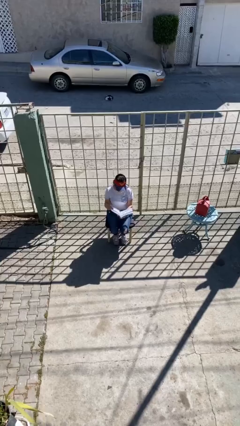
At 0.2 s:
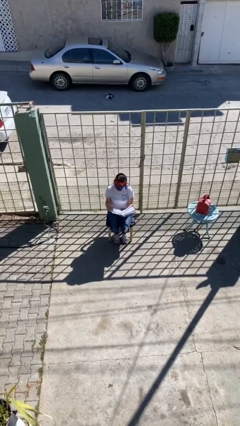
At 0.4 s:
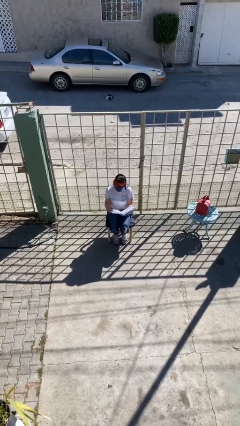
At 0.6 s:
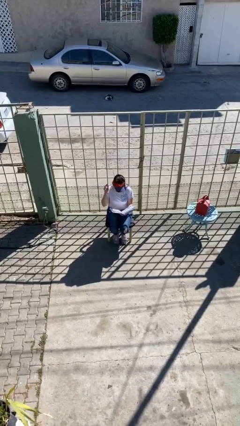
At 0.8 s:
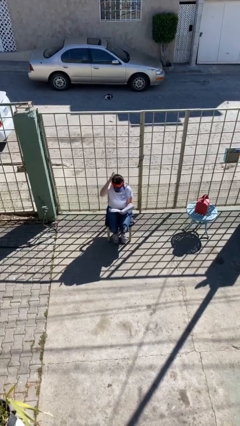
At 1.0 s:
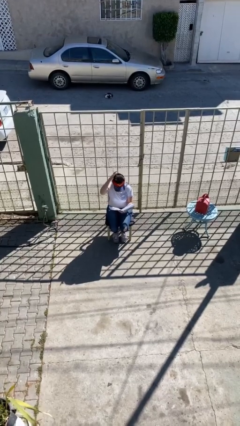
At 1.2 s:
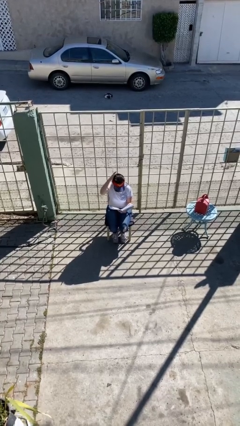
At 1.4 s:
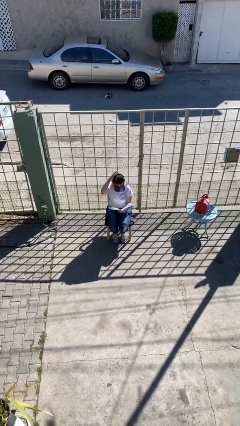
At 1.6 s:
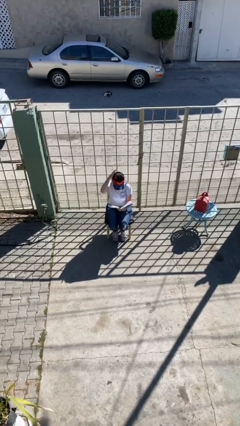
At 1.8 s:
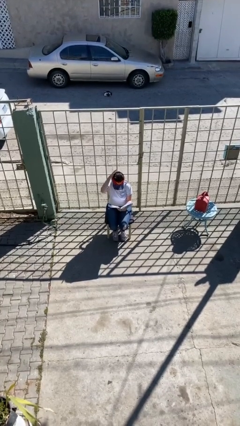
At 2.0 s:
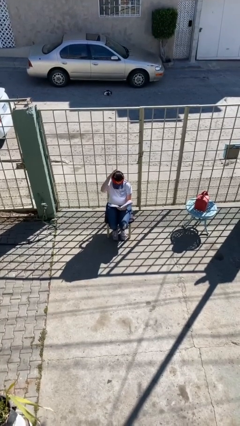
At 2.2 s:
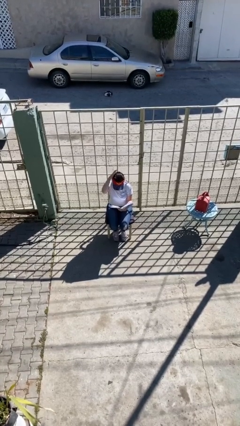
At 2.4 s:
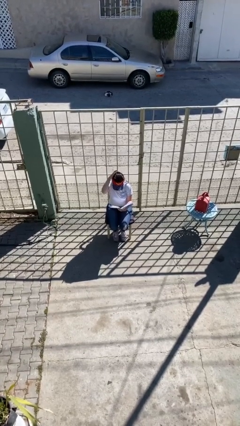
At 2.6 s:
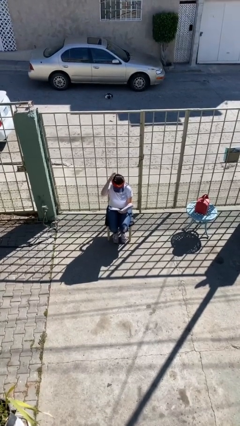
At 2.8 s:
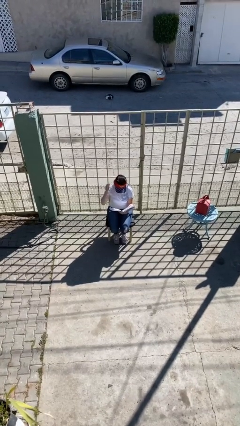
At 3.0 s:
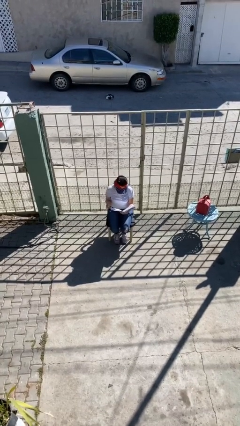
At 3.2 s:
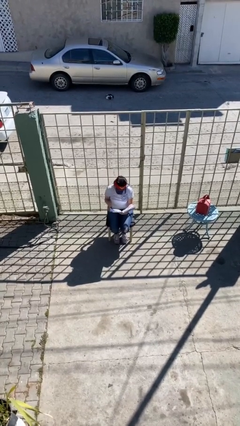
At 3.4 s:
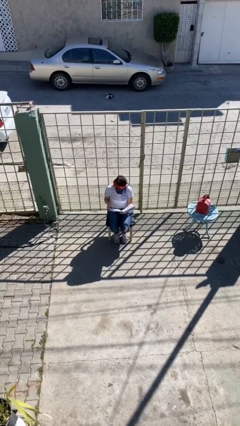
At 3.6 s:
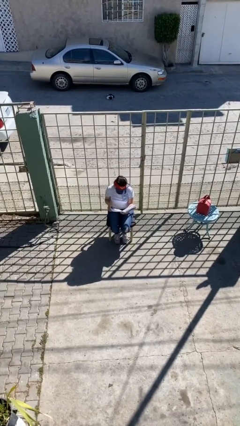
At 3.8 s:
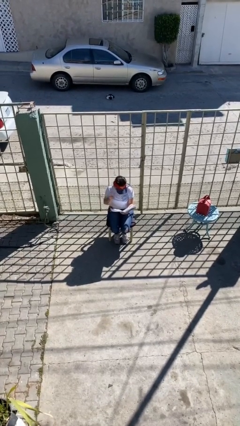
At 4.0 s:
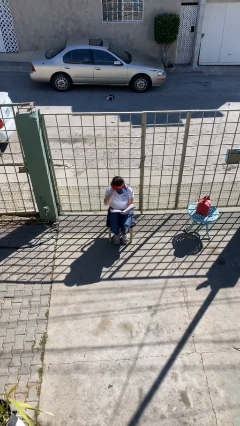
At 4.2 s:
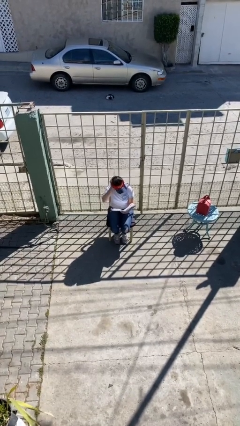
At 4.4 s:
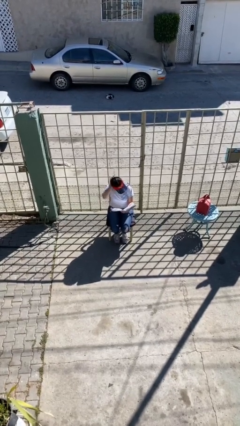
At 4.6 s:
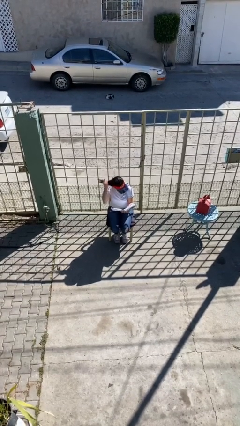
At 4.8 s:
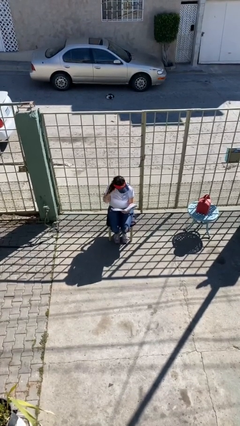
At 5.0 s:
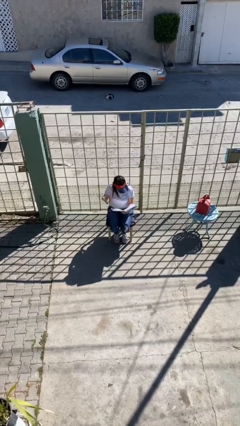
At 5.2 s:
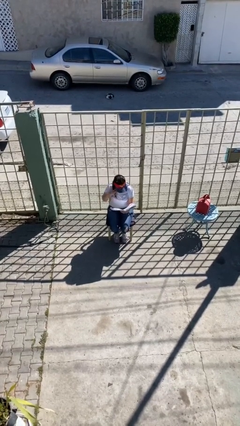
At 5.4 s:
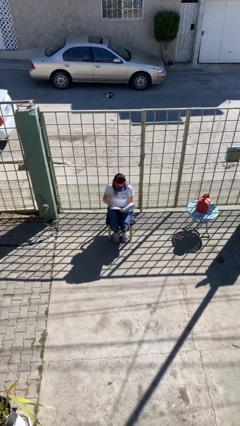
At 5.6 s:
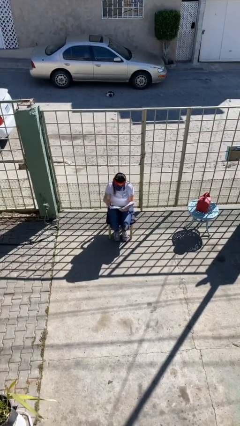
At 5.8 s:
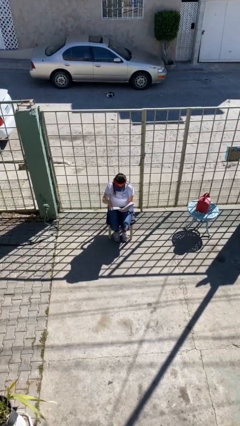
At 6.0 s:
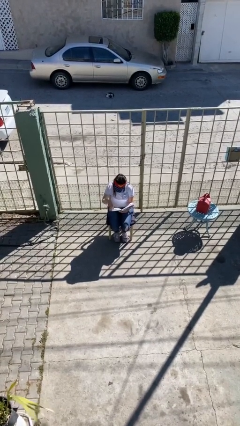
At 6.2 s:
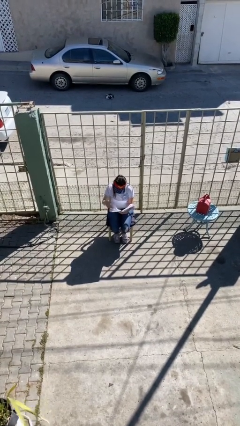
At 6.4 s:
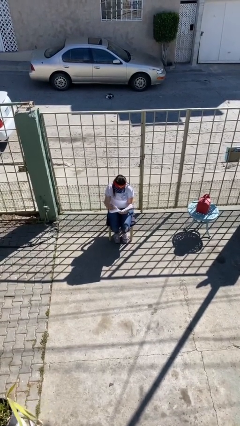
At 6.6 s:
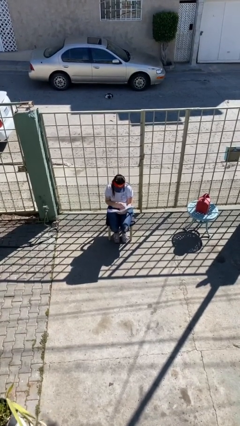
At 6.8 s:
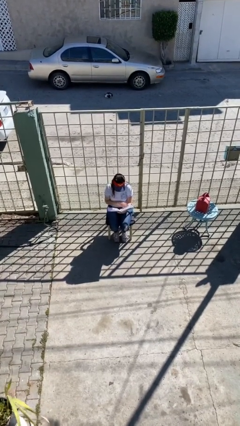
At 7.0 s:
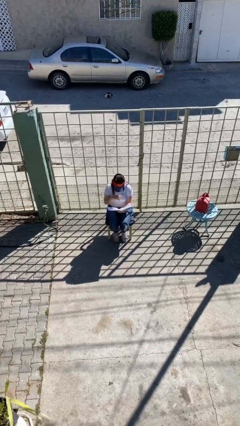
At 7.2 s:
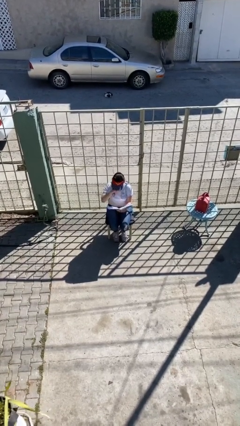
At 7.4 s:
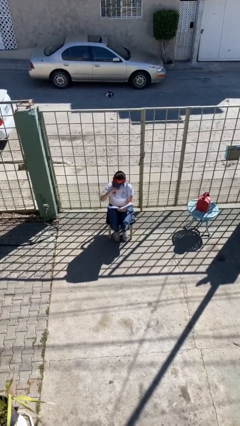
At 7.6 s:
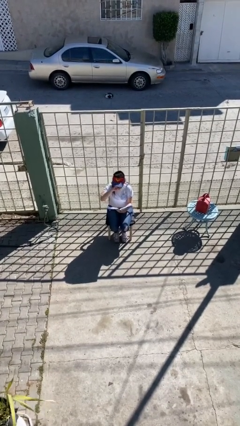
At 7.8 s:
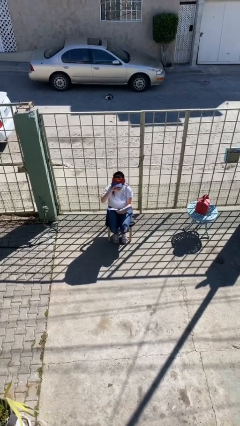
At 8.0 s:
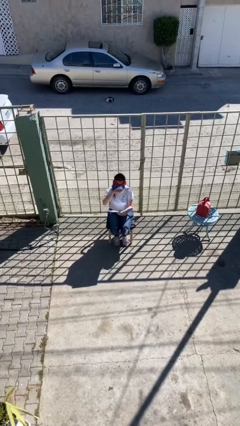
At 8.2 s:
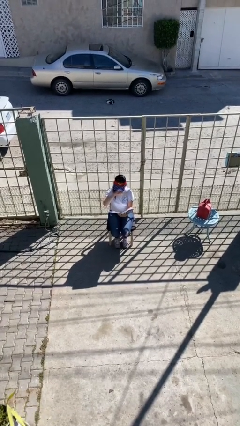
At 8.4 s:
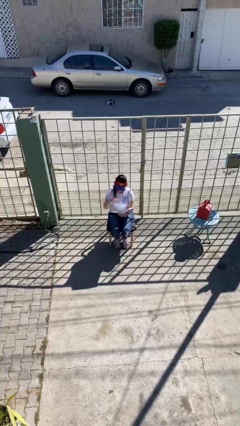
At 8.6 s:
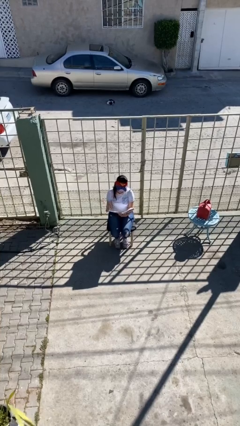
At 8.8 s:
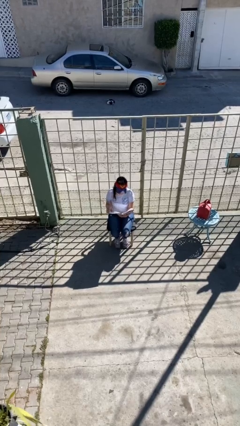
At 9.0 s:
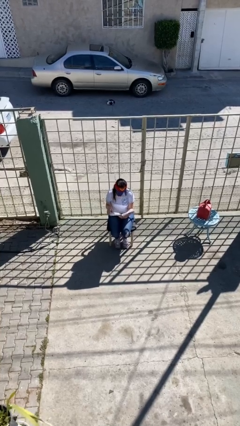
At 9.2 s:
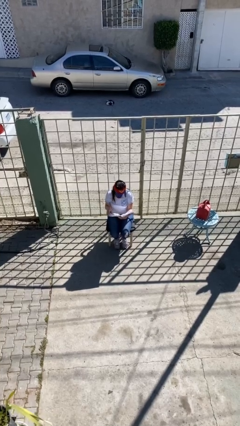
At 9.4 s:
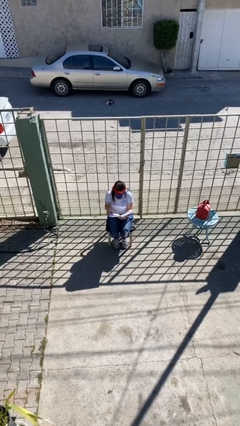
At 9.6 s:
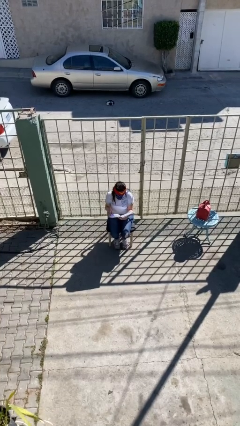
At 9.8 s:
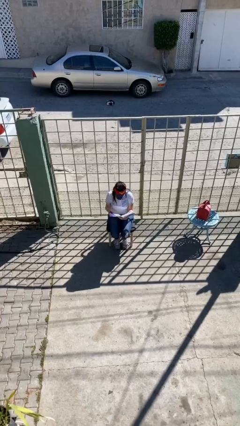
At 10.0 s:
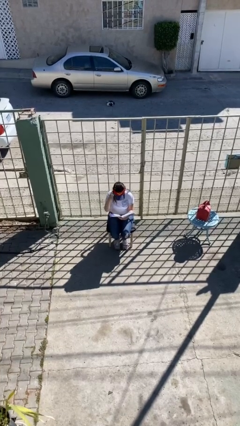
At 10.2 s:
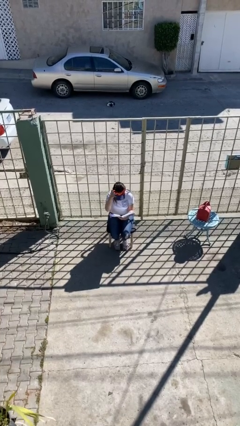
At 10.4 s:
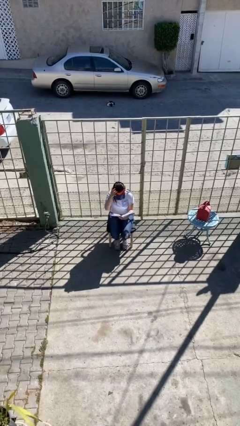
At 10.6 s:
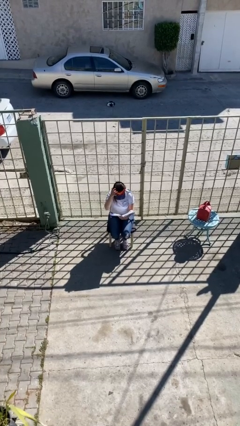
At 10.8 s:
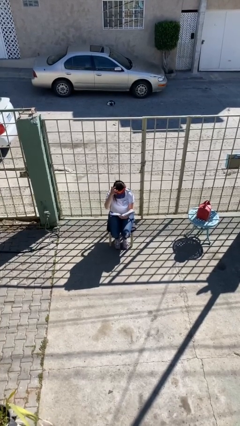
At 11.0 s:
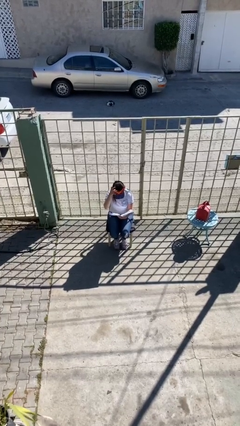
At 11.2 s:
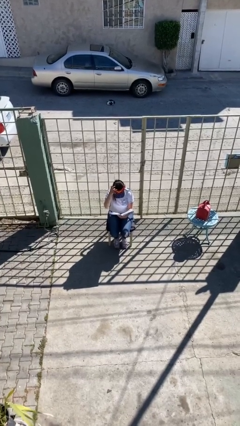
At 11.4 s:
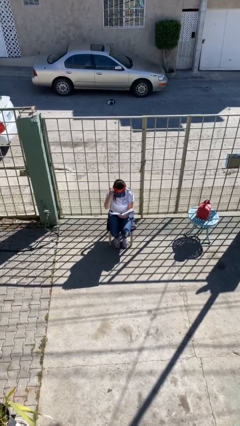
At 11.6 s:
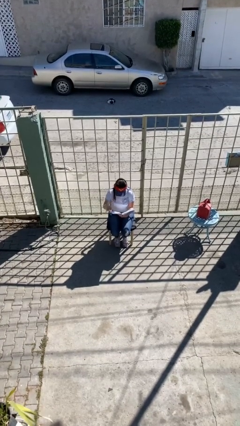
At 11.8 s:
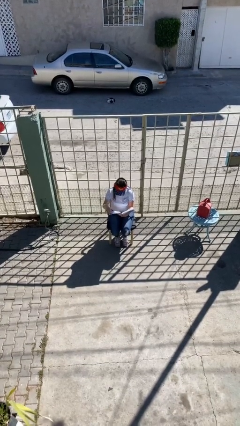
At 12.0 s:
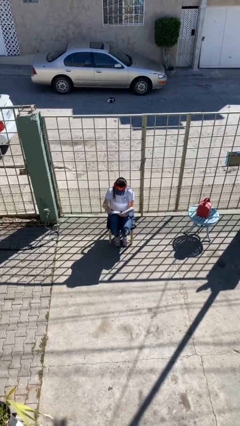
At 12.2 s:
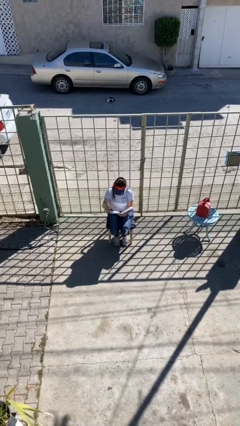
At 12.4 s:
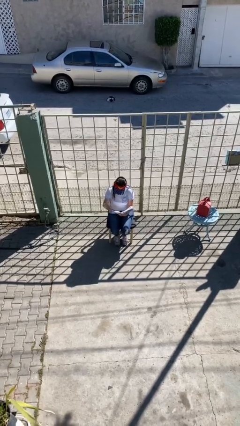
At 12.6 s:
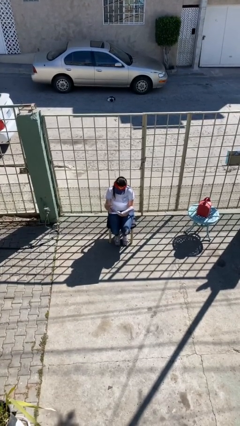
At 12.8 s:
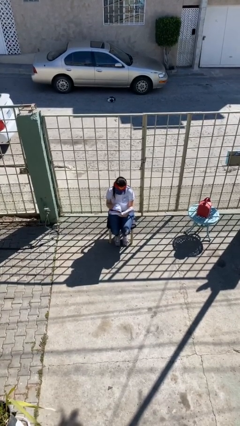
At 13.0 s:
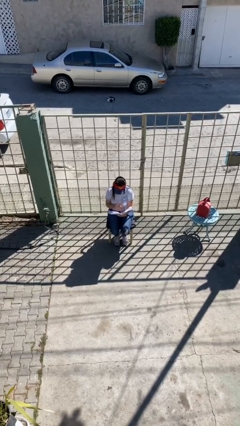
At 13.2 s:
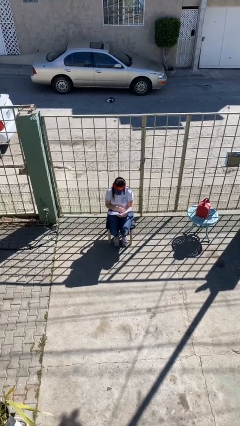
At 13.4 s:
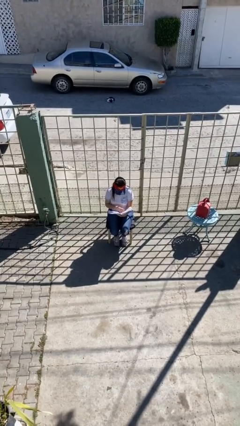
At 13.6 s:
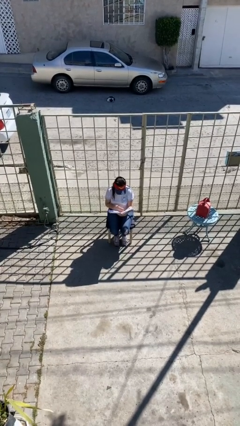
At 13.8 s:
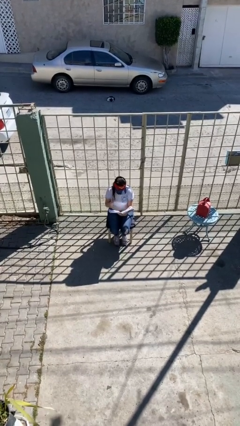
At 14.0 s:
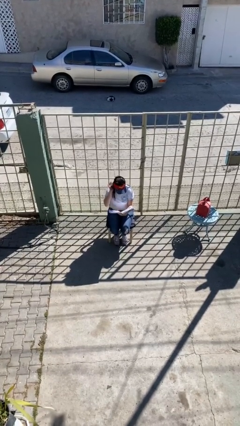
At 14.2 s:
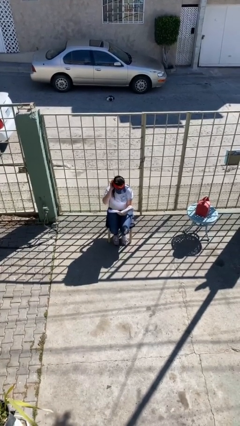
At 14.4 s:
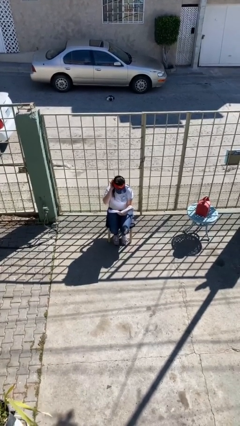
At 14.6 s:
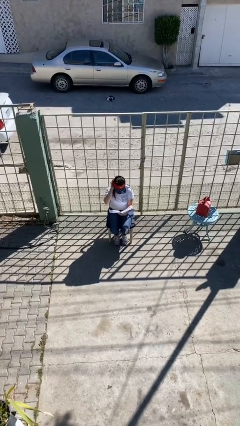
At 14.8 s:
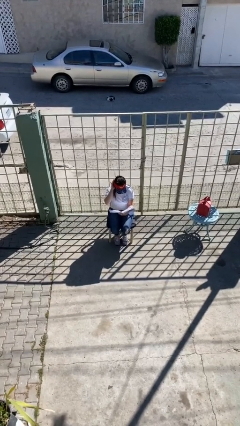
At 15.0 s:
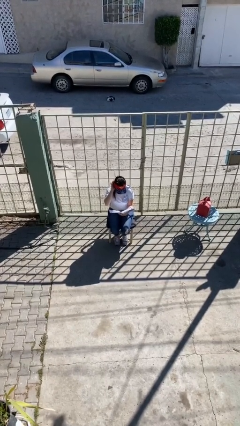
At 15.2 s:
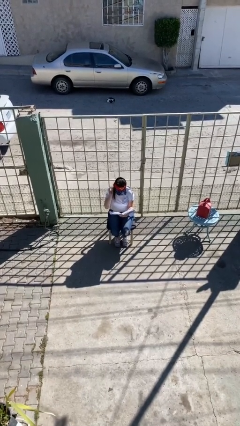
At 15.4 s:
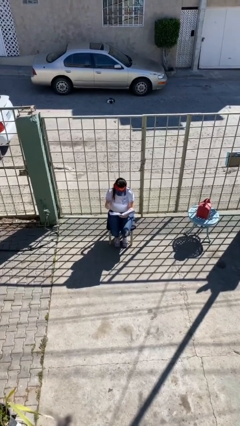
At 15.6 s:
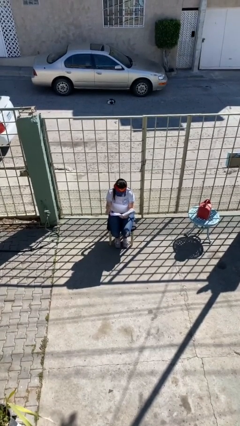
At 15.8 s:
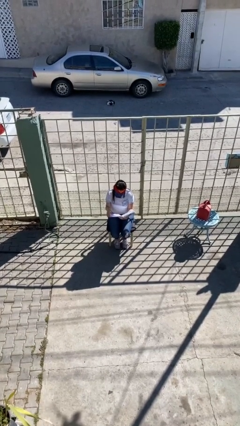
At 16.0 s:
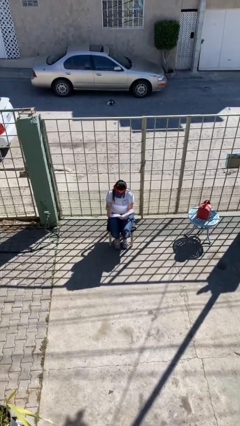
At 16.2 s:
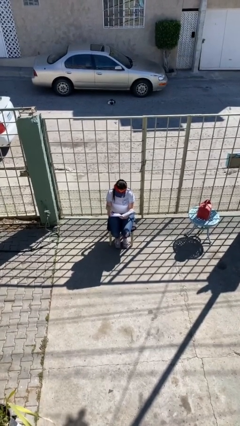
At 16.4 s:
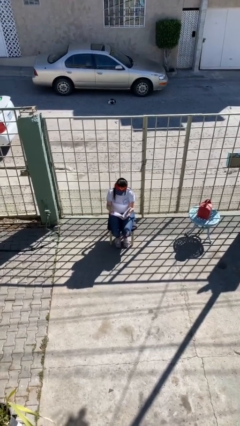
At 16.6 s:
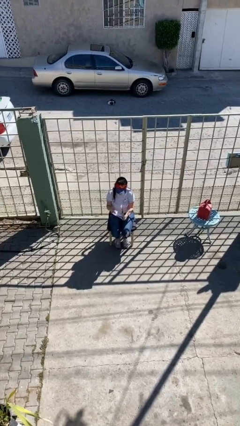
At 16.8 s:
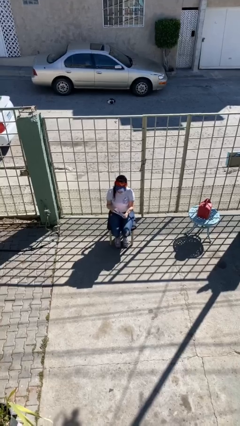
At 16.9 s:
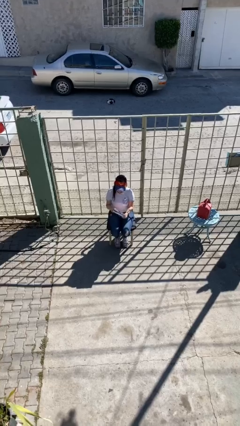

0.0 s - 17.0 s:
person reads document

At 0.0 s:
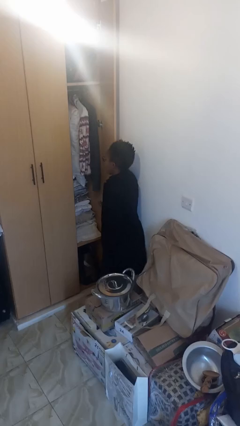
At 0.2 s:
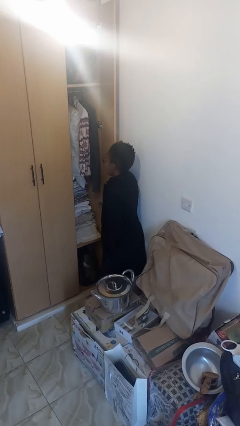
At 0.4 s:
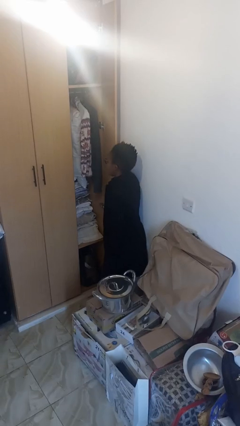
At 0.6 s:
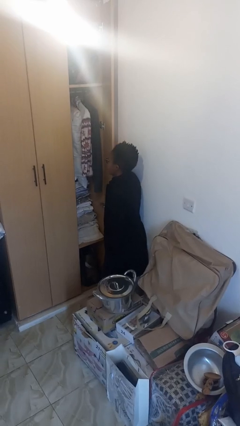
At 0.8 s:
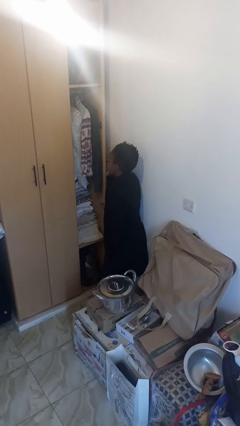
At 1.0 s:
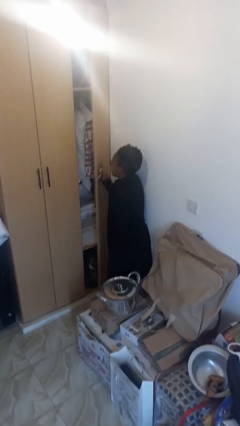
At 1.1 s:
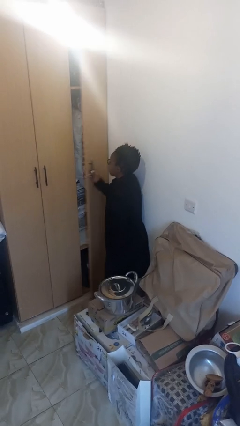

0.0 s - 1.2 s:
person closes closet door
